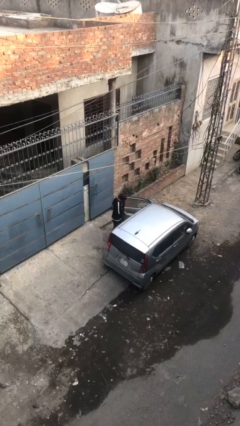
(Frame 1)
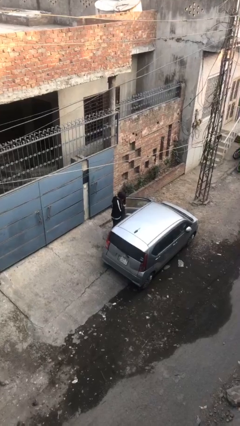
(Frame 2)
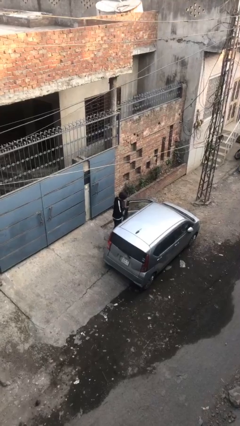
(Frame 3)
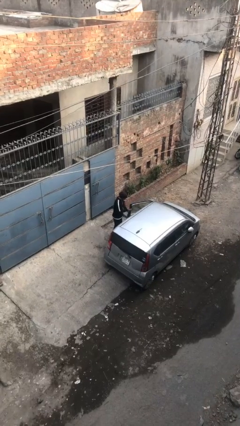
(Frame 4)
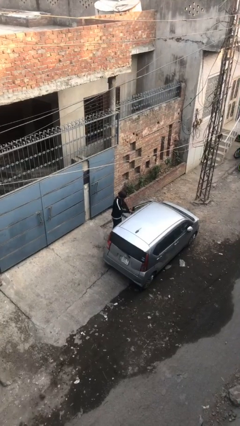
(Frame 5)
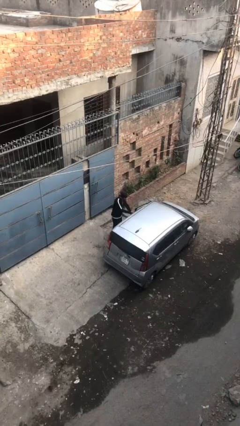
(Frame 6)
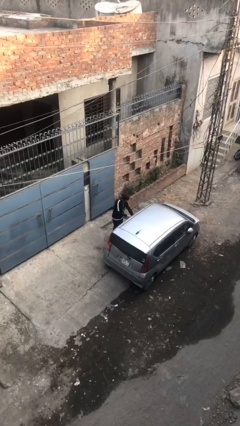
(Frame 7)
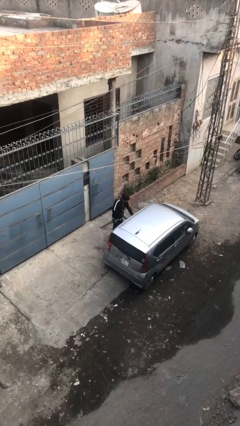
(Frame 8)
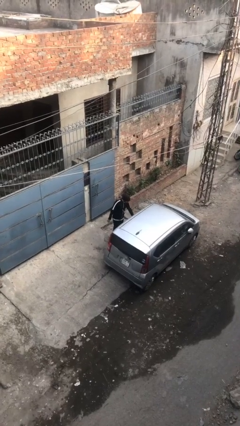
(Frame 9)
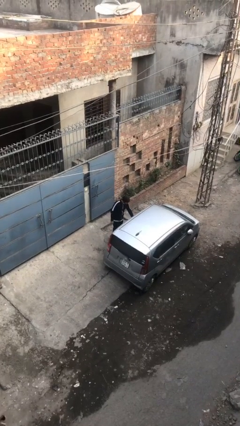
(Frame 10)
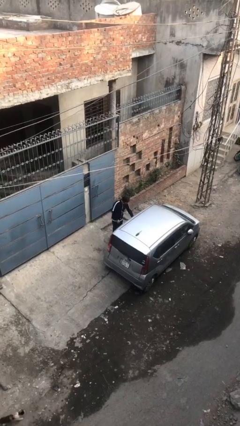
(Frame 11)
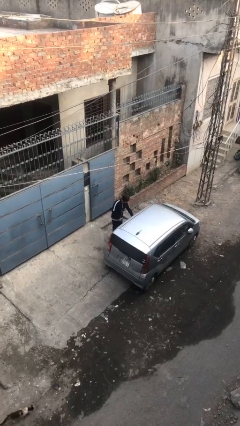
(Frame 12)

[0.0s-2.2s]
person closes car door

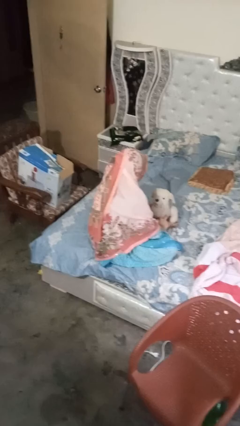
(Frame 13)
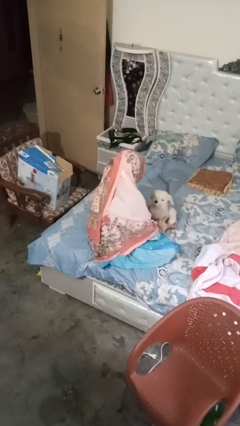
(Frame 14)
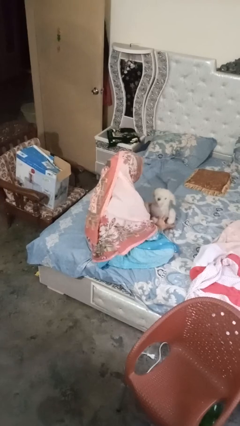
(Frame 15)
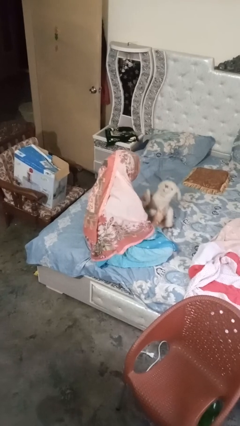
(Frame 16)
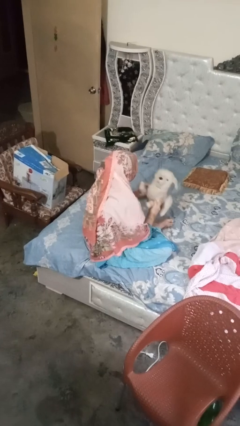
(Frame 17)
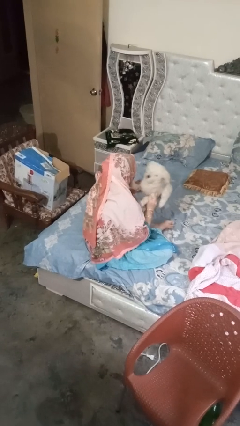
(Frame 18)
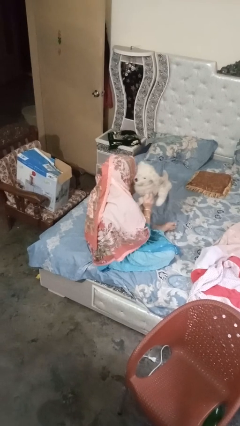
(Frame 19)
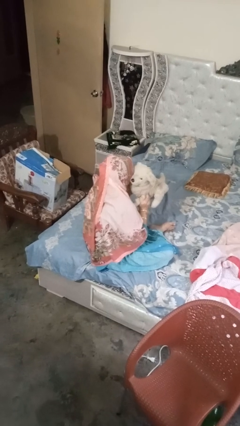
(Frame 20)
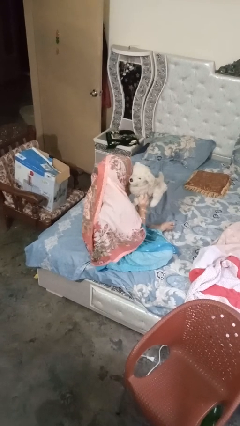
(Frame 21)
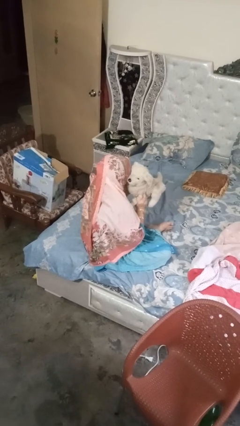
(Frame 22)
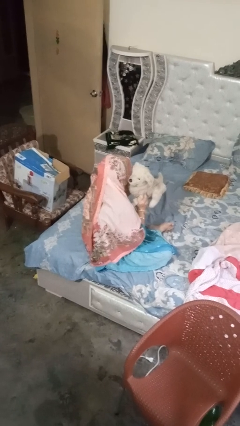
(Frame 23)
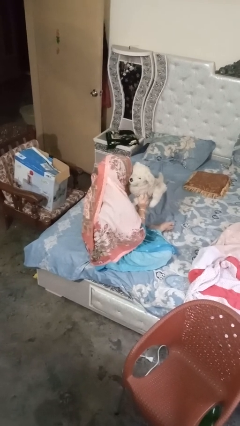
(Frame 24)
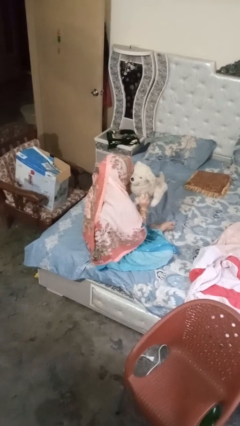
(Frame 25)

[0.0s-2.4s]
person hugs stuffed animal

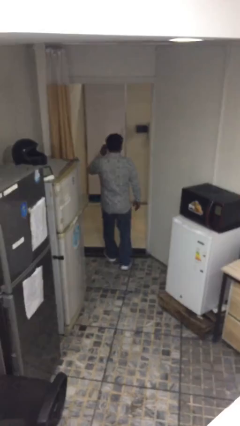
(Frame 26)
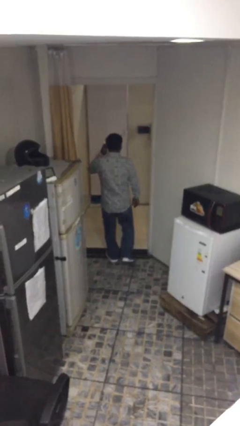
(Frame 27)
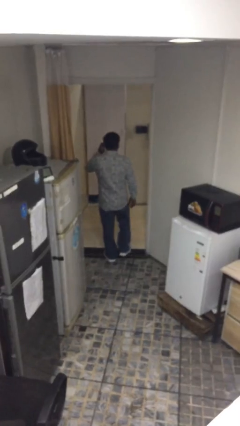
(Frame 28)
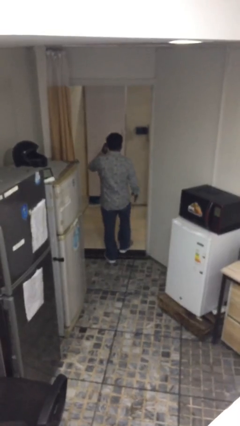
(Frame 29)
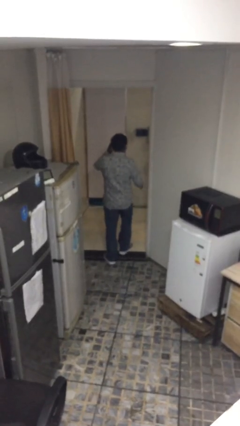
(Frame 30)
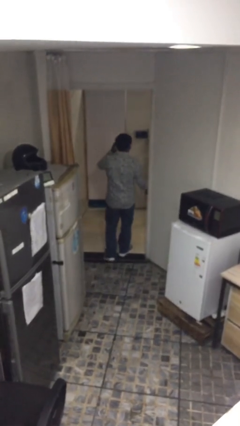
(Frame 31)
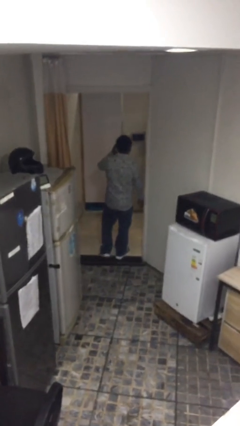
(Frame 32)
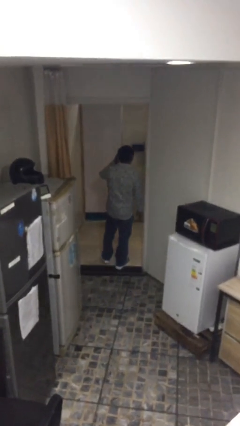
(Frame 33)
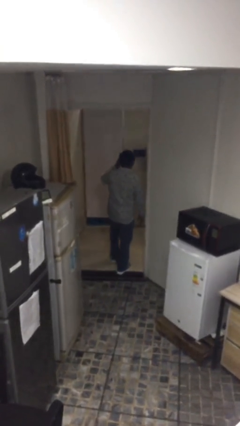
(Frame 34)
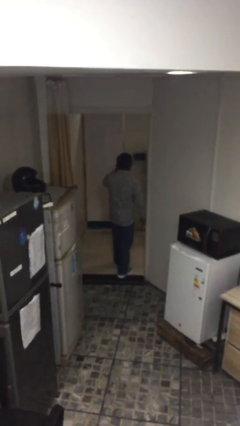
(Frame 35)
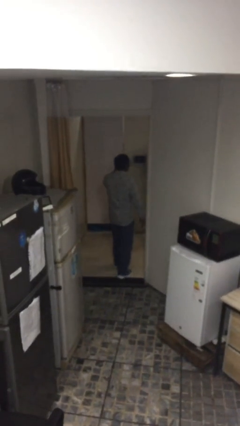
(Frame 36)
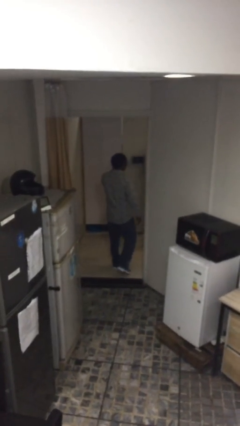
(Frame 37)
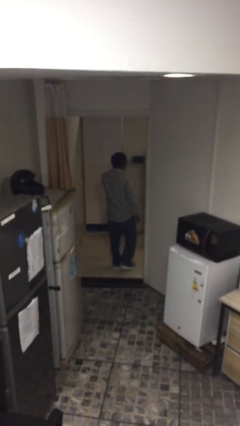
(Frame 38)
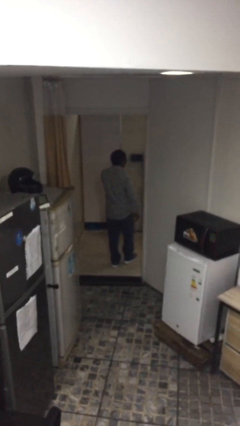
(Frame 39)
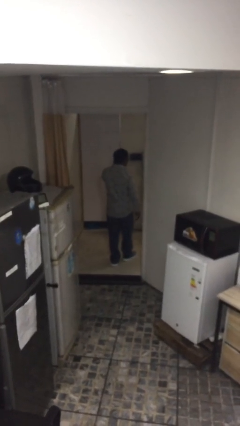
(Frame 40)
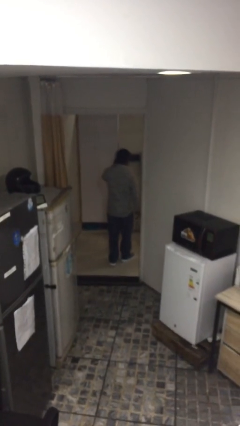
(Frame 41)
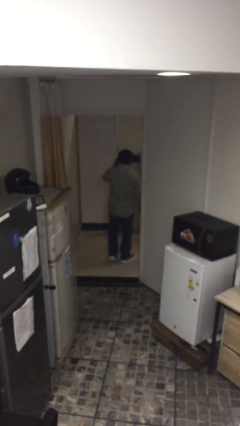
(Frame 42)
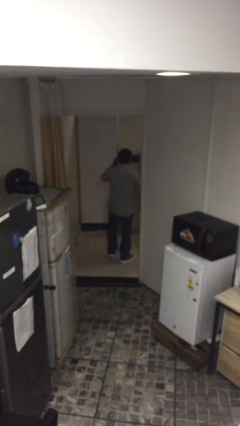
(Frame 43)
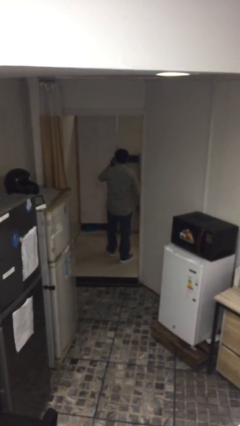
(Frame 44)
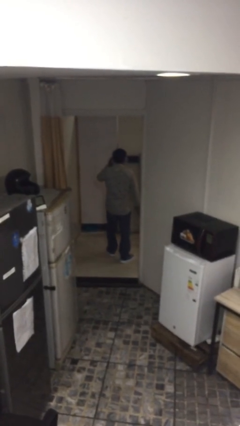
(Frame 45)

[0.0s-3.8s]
person exits scene through structure

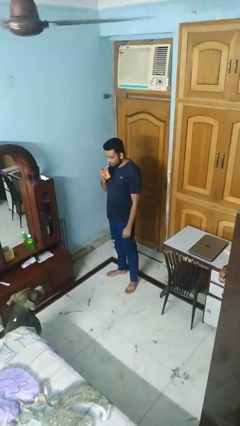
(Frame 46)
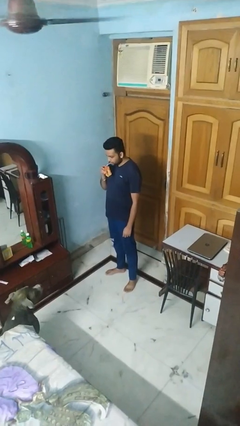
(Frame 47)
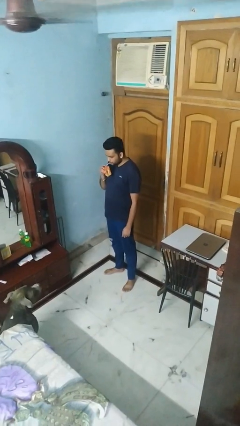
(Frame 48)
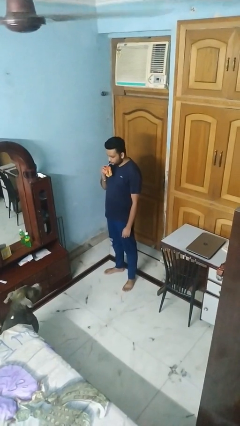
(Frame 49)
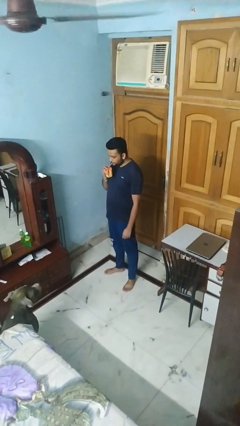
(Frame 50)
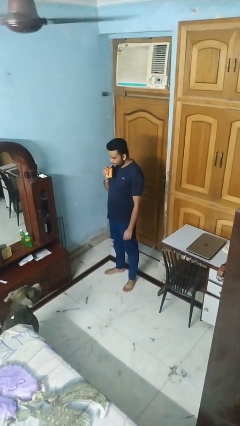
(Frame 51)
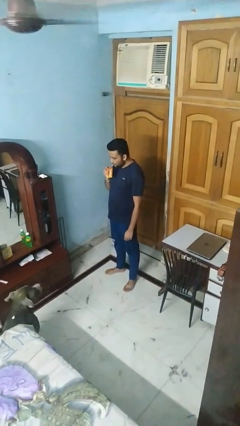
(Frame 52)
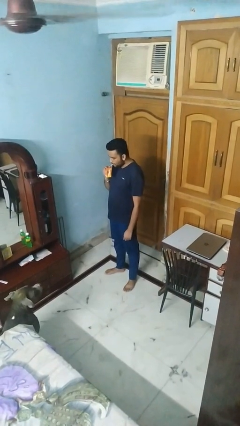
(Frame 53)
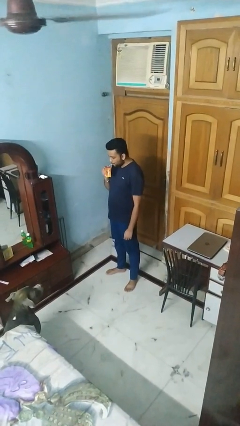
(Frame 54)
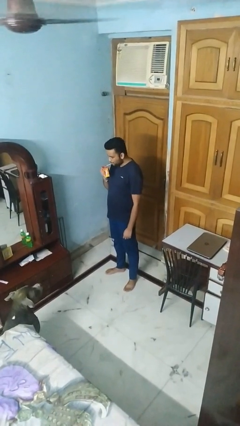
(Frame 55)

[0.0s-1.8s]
person drinks from straw

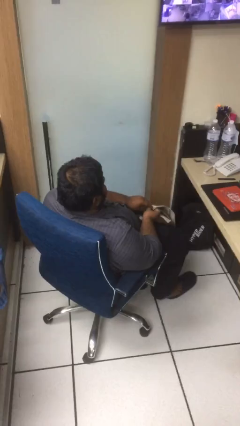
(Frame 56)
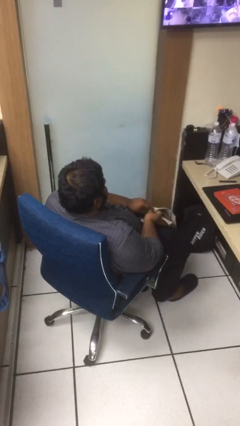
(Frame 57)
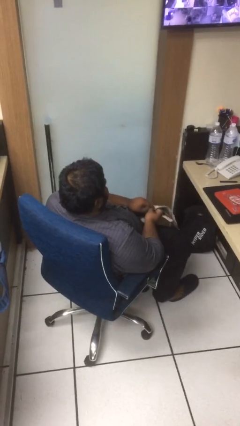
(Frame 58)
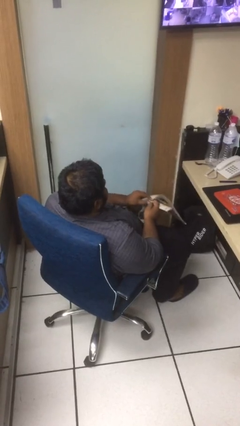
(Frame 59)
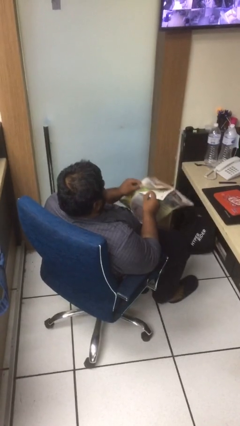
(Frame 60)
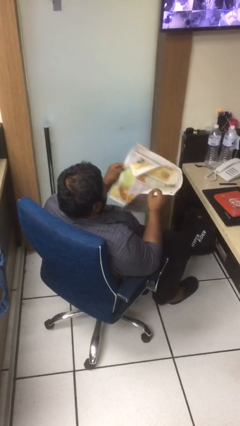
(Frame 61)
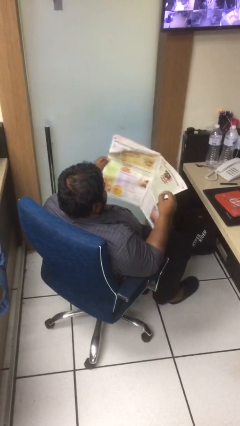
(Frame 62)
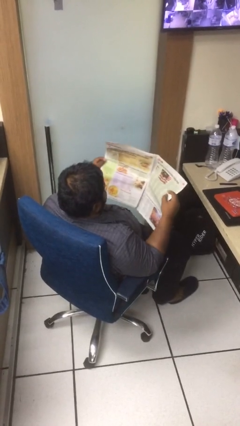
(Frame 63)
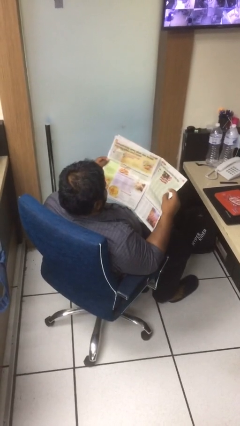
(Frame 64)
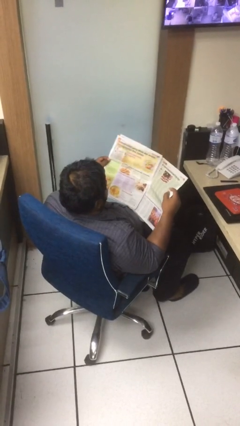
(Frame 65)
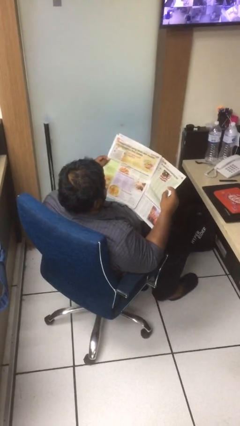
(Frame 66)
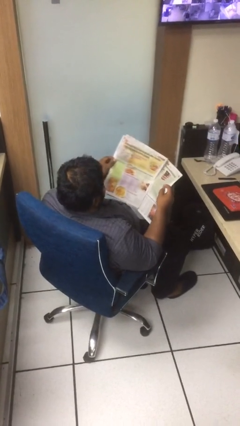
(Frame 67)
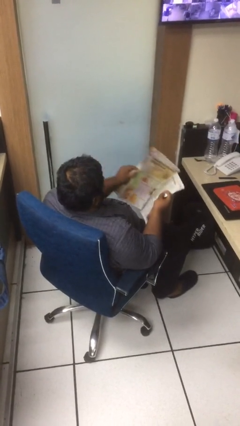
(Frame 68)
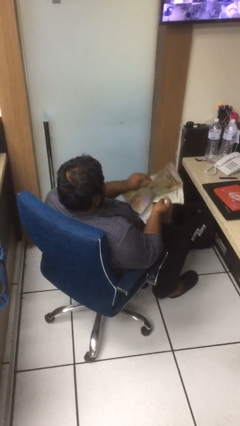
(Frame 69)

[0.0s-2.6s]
person reads newspaper

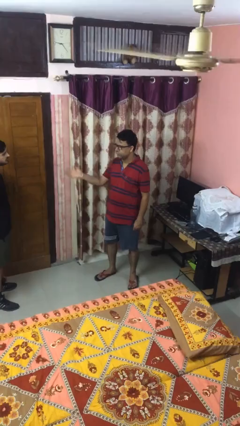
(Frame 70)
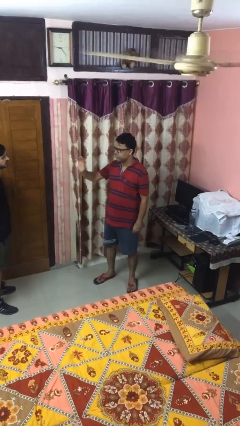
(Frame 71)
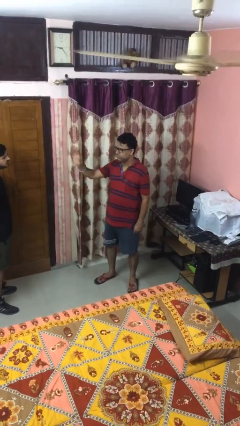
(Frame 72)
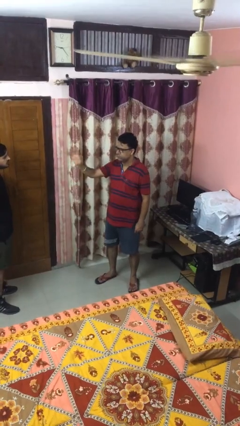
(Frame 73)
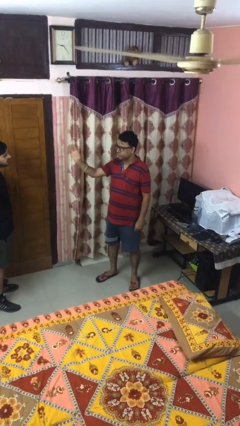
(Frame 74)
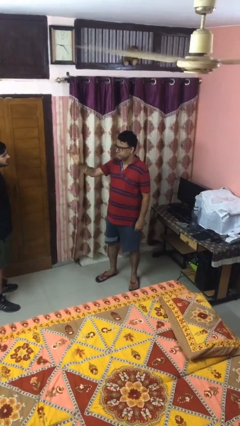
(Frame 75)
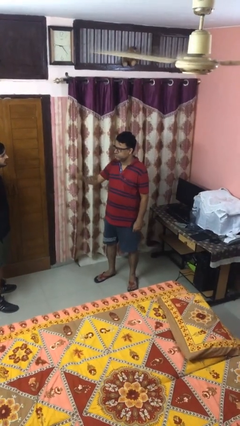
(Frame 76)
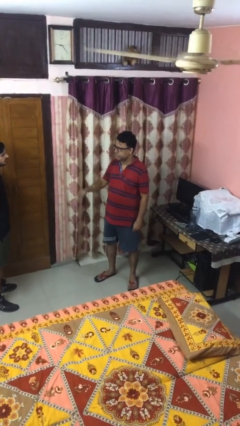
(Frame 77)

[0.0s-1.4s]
person waves at person

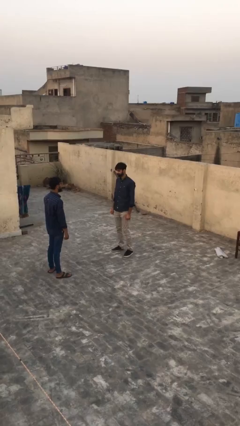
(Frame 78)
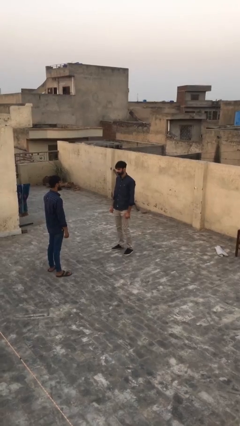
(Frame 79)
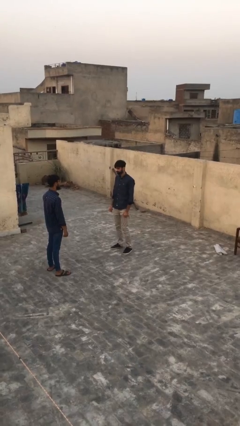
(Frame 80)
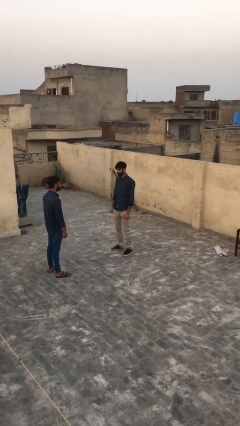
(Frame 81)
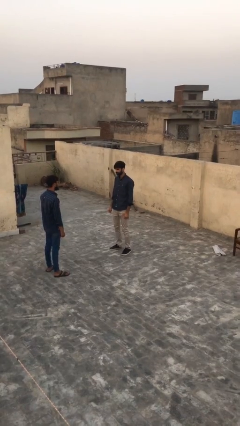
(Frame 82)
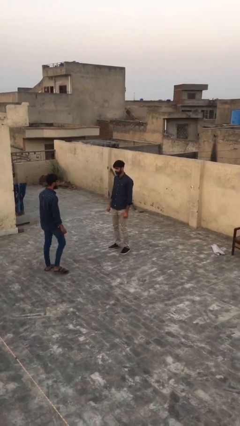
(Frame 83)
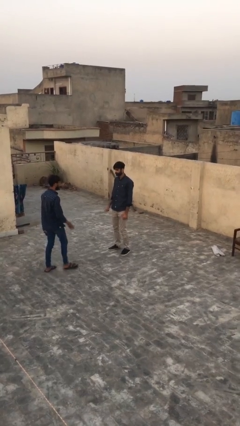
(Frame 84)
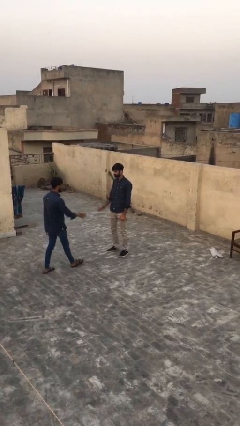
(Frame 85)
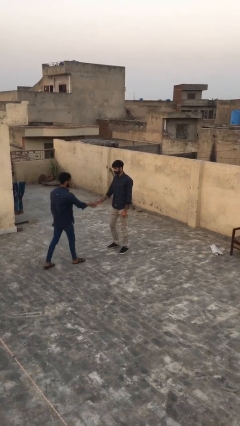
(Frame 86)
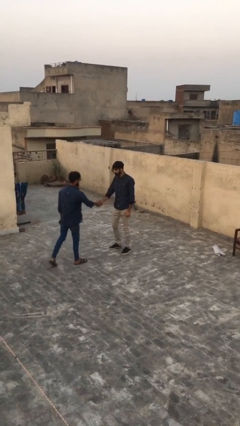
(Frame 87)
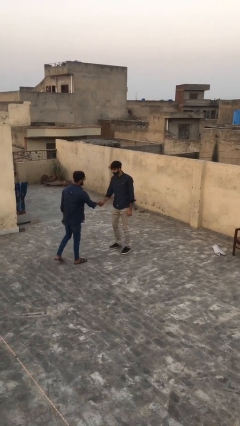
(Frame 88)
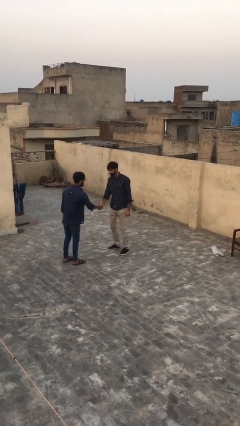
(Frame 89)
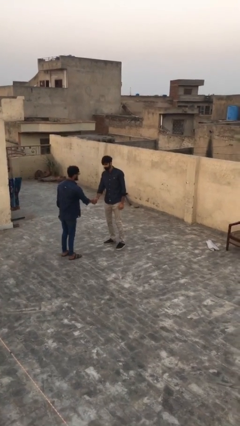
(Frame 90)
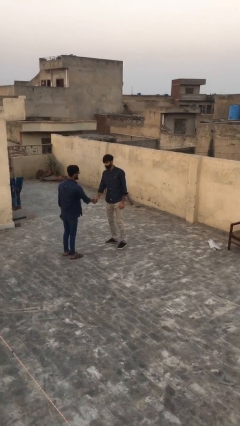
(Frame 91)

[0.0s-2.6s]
person shakes hand
